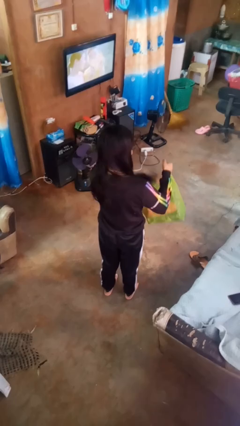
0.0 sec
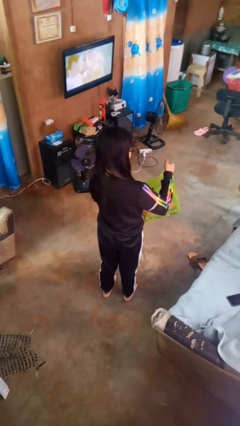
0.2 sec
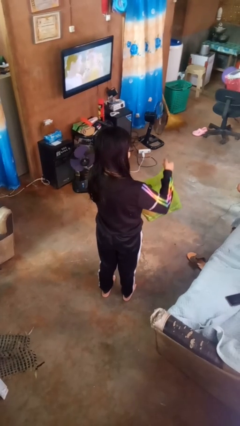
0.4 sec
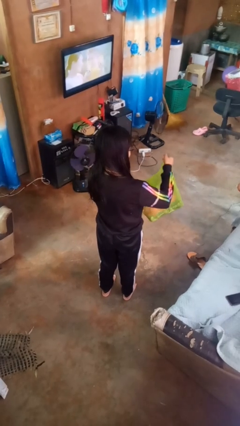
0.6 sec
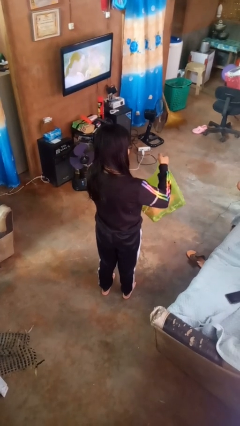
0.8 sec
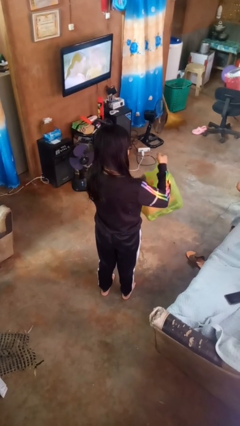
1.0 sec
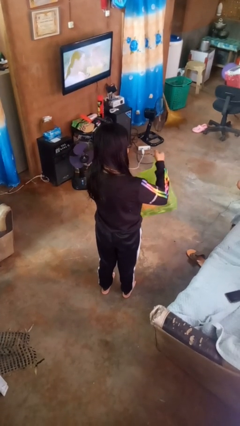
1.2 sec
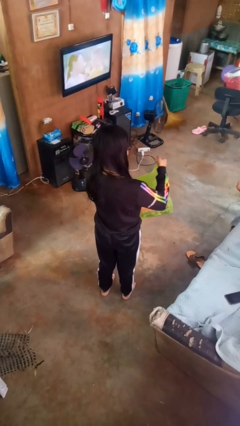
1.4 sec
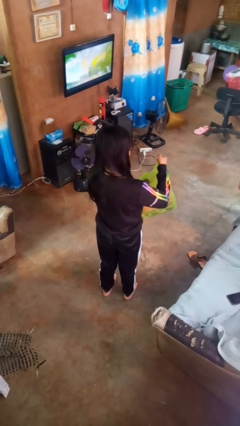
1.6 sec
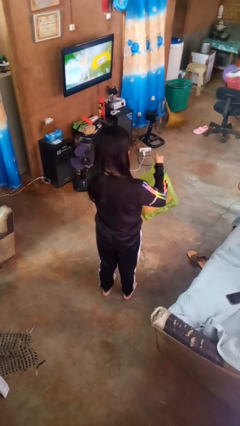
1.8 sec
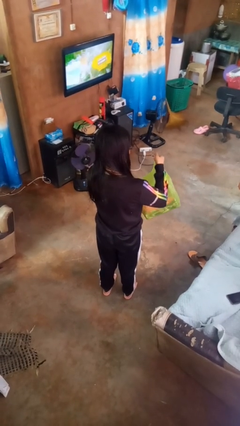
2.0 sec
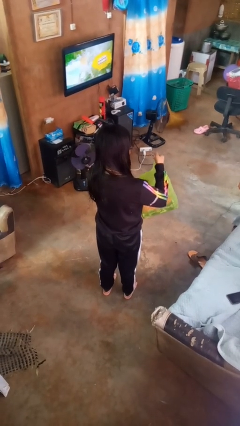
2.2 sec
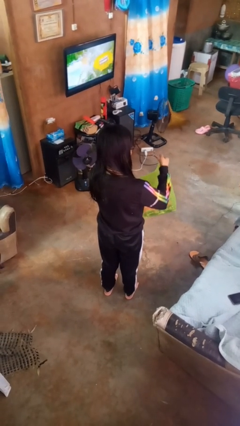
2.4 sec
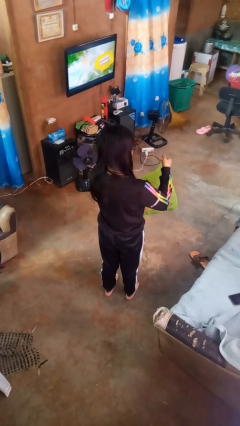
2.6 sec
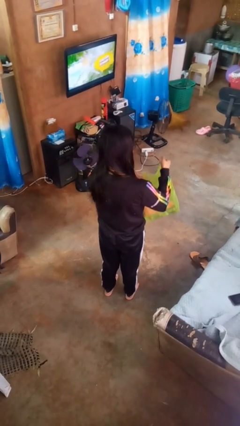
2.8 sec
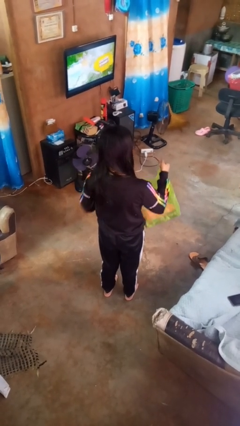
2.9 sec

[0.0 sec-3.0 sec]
person searches in bag

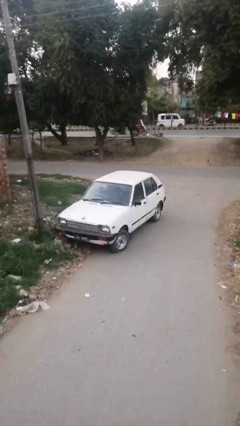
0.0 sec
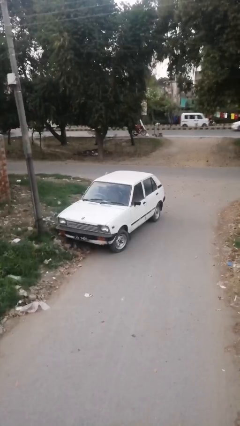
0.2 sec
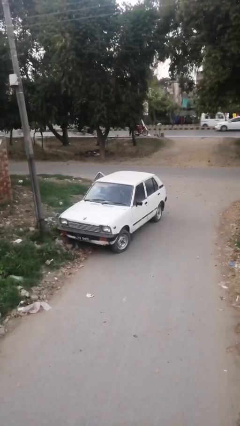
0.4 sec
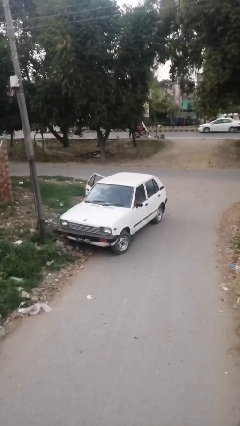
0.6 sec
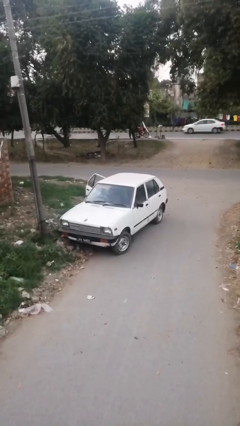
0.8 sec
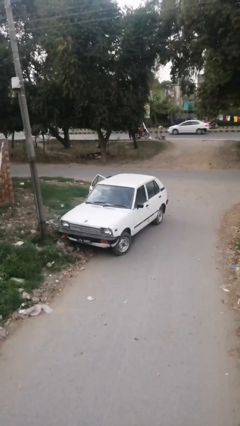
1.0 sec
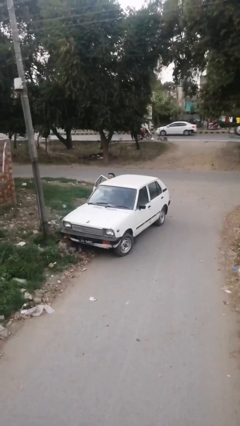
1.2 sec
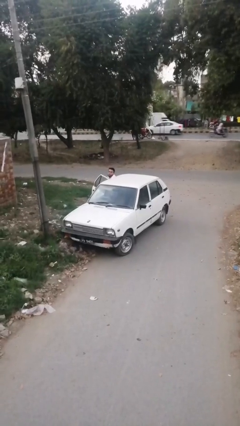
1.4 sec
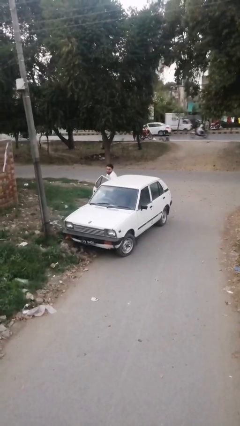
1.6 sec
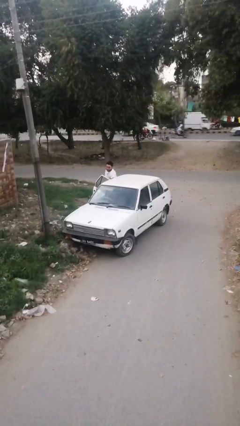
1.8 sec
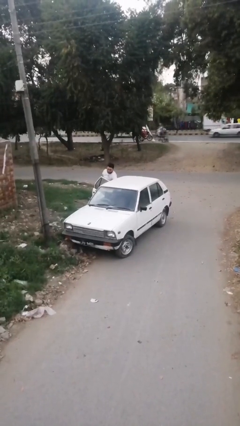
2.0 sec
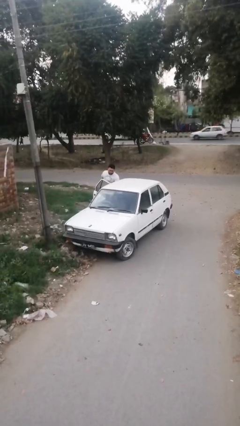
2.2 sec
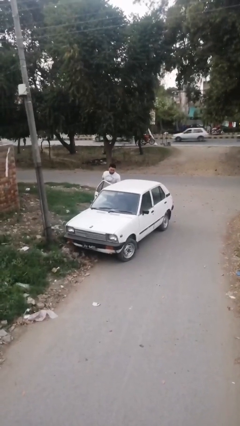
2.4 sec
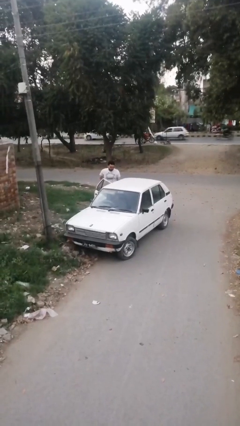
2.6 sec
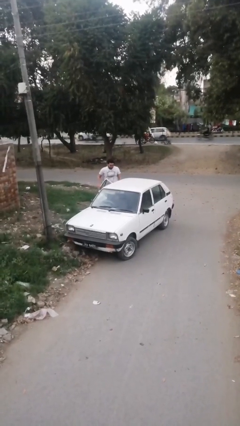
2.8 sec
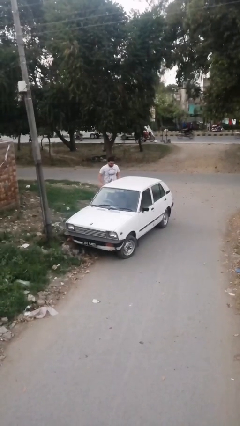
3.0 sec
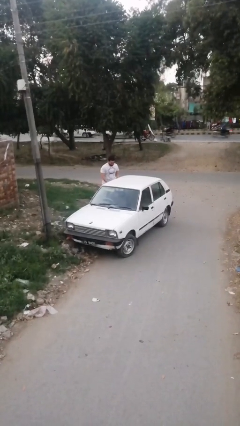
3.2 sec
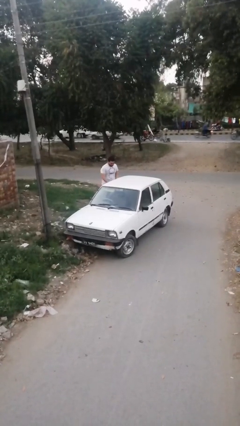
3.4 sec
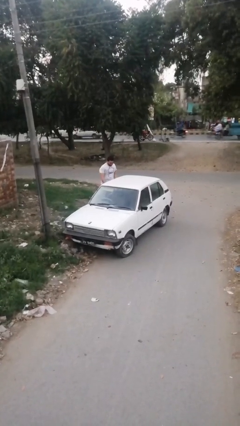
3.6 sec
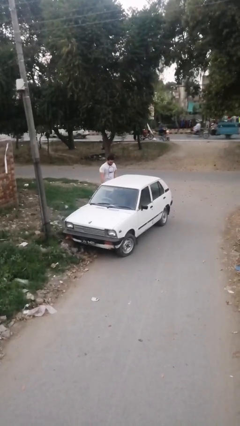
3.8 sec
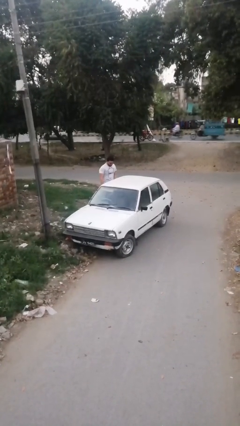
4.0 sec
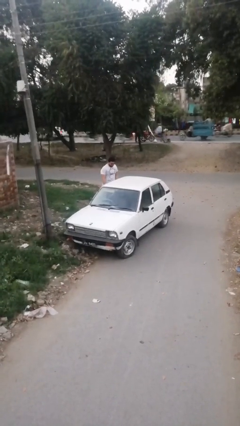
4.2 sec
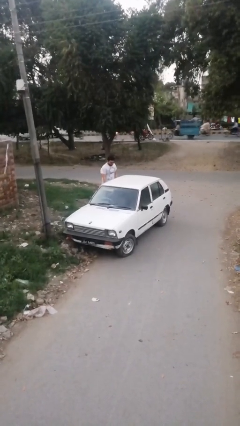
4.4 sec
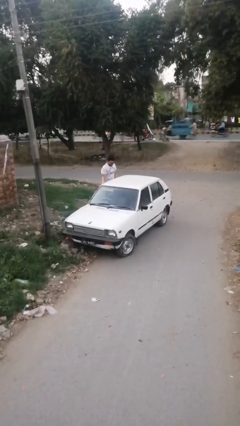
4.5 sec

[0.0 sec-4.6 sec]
car drops off person

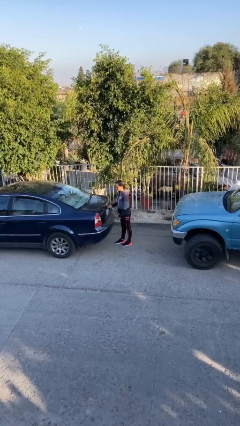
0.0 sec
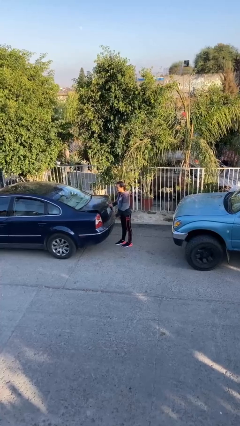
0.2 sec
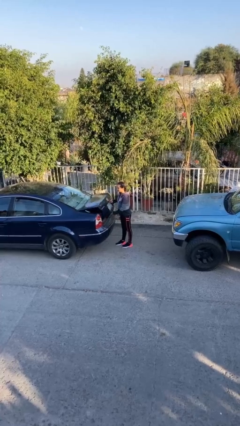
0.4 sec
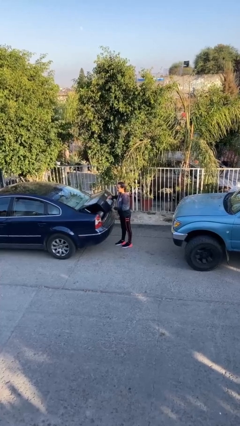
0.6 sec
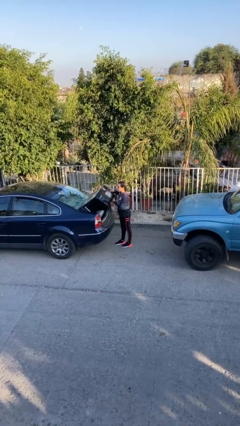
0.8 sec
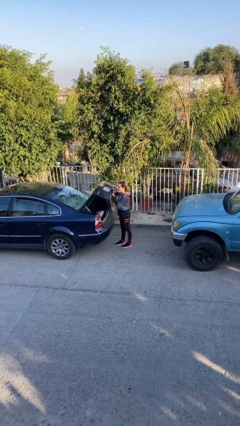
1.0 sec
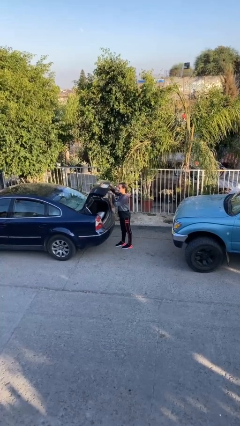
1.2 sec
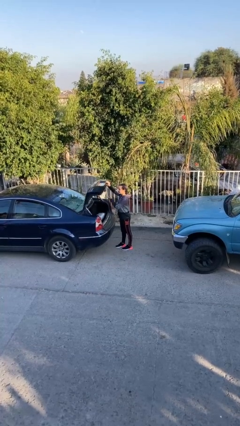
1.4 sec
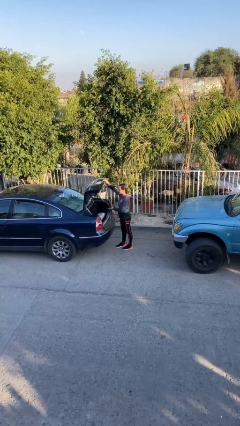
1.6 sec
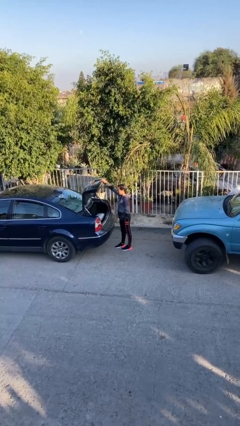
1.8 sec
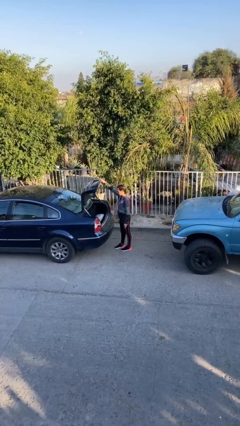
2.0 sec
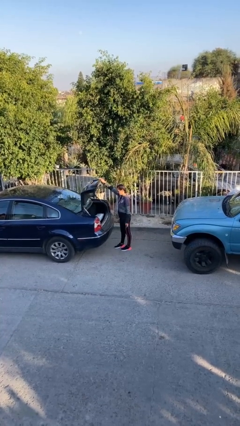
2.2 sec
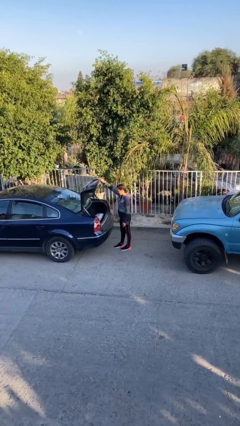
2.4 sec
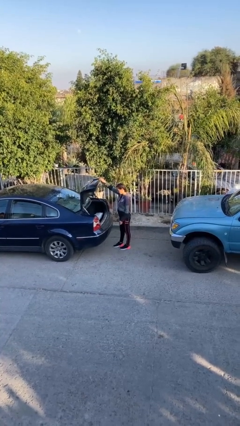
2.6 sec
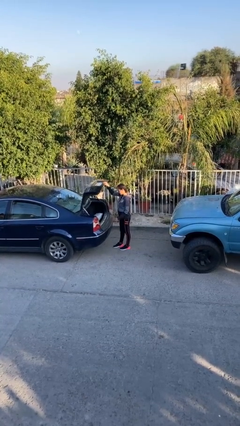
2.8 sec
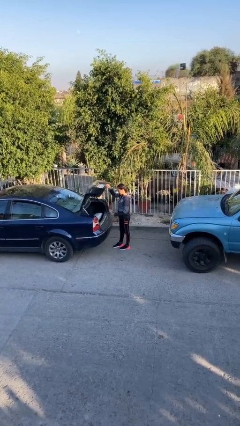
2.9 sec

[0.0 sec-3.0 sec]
person opens car trunk

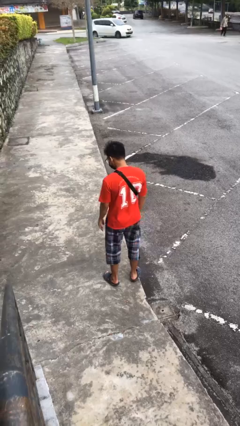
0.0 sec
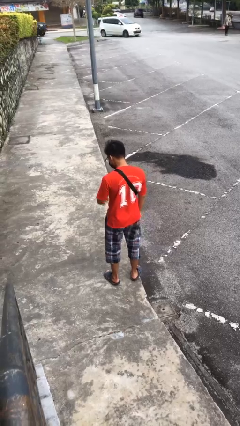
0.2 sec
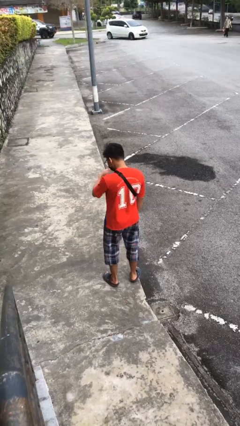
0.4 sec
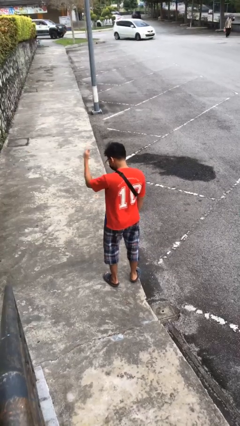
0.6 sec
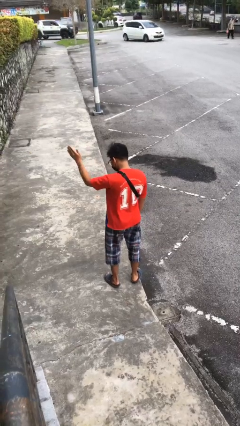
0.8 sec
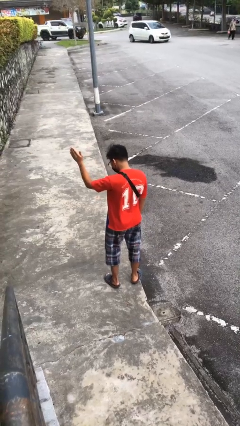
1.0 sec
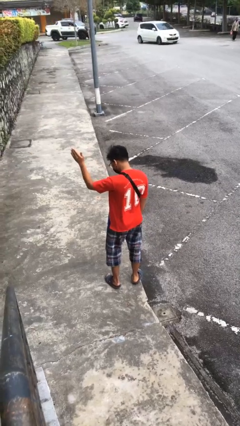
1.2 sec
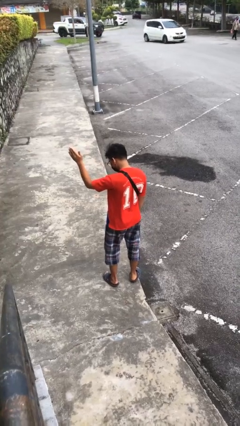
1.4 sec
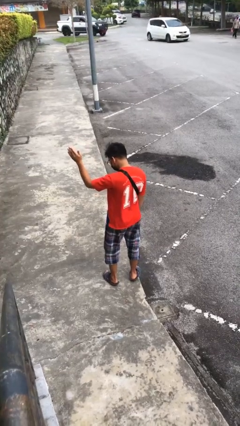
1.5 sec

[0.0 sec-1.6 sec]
person gestures swipe left

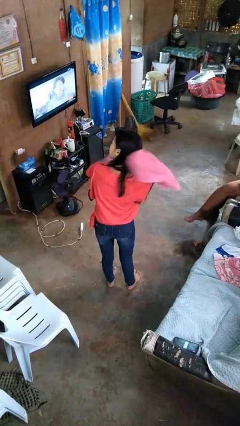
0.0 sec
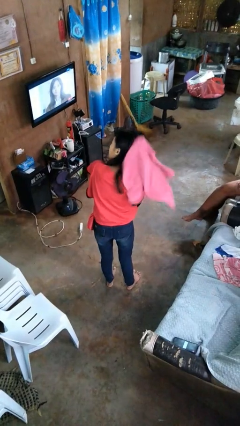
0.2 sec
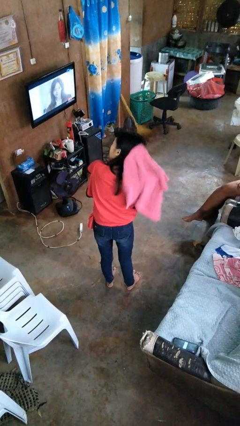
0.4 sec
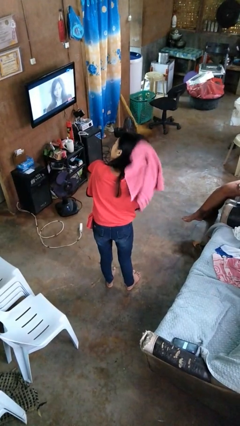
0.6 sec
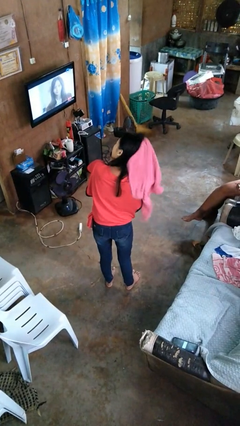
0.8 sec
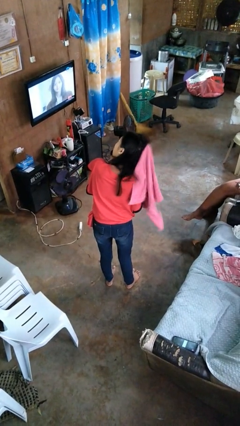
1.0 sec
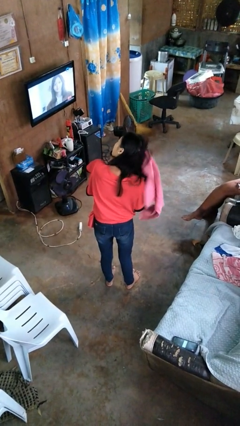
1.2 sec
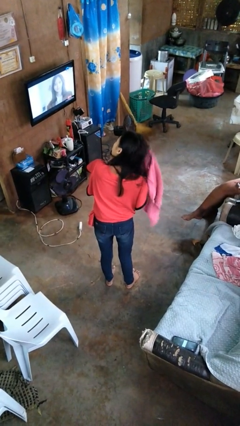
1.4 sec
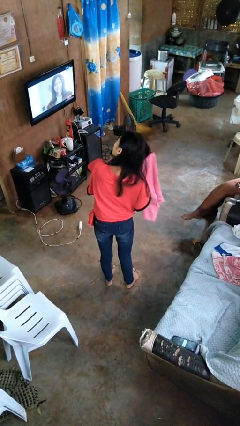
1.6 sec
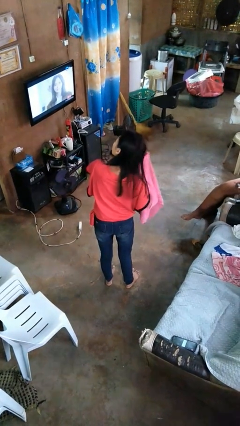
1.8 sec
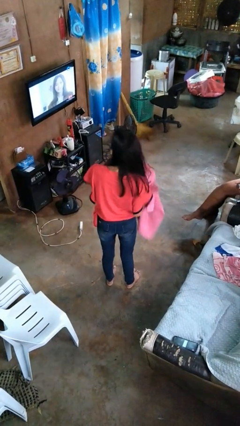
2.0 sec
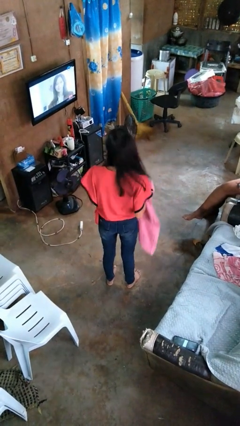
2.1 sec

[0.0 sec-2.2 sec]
person dries hair with towel

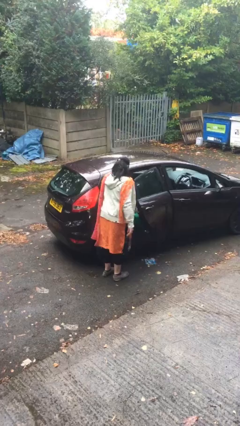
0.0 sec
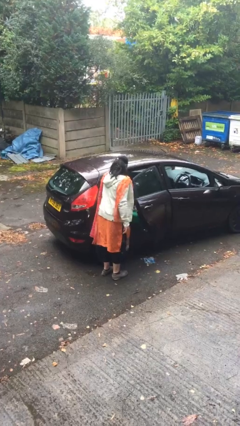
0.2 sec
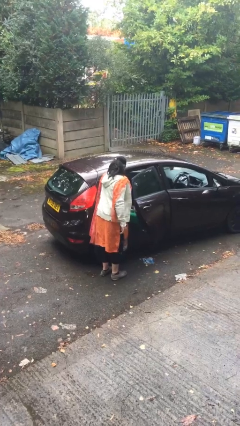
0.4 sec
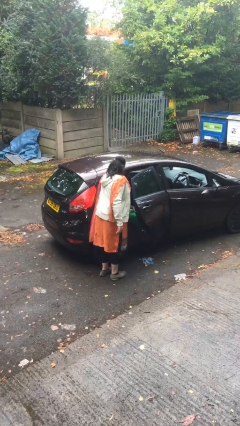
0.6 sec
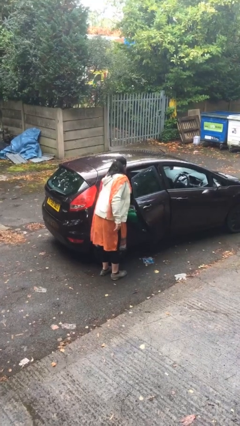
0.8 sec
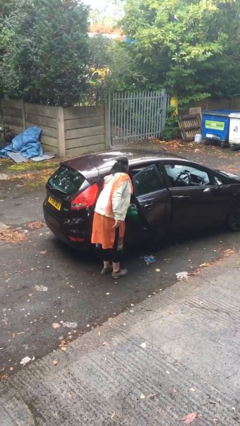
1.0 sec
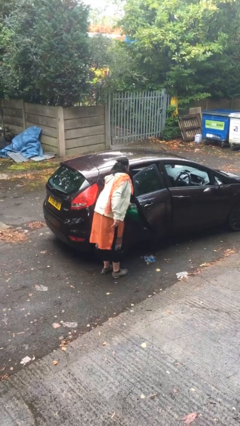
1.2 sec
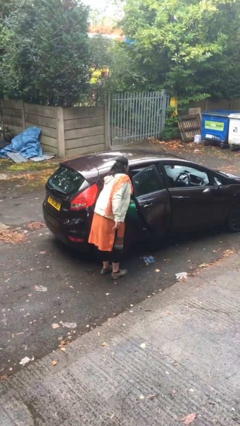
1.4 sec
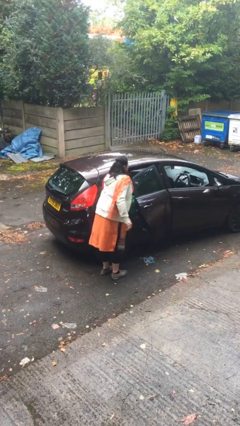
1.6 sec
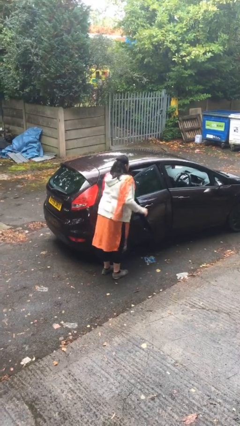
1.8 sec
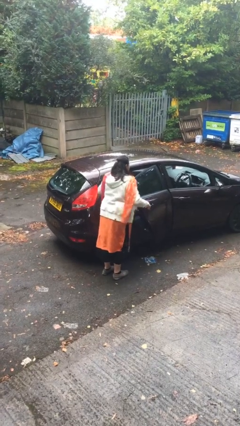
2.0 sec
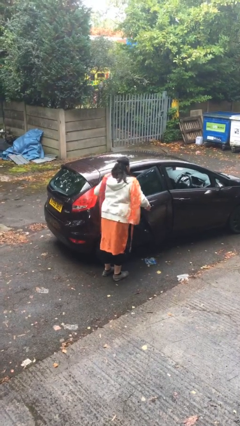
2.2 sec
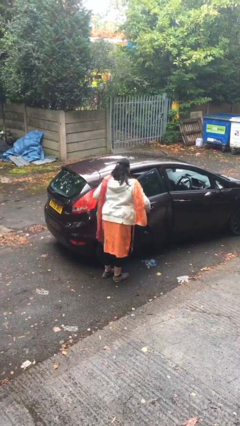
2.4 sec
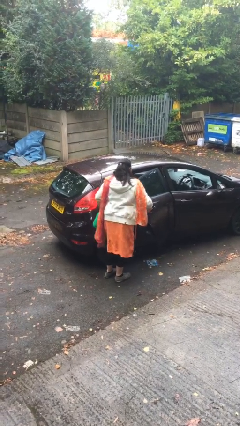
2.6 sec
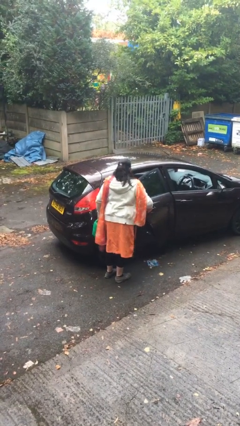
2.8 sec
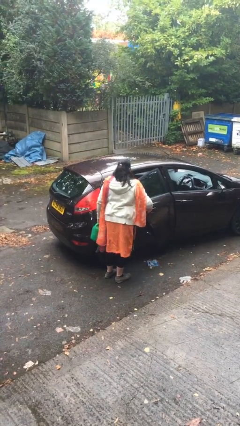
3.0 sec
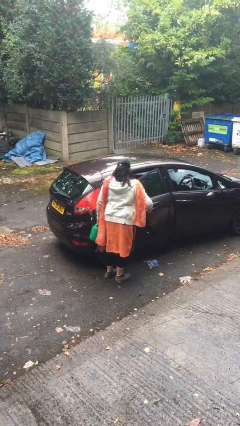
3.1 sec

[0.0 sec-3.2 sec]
person unloads car
